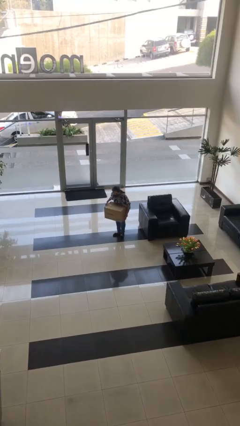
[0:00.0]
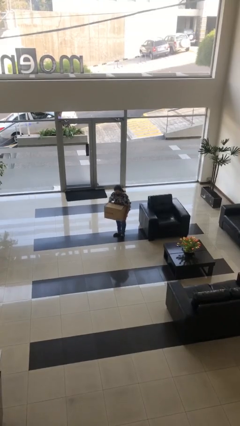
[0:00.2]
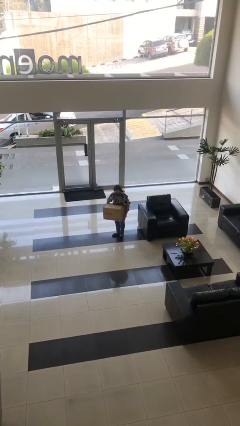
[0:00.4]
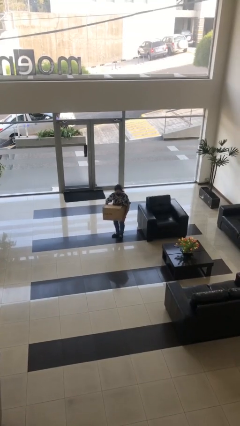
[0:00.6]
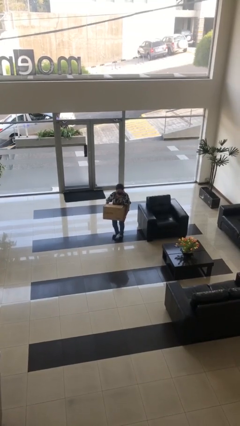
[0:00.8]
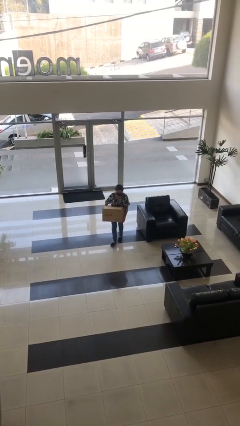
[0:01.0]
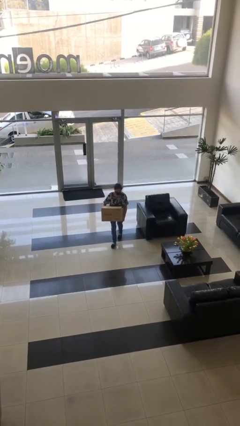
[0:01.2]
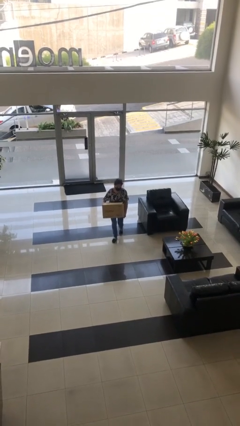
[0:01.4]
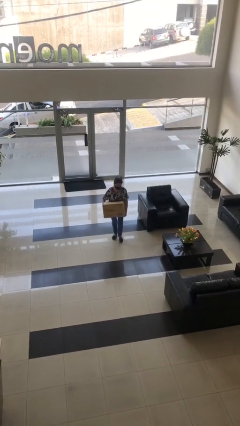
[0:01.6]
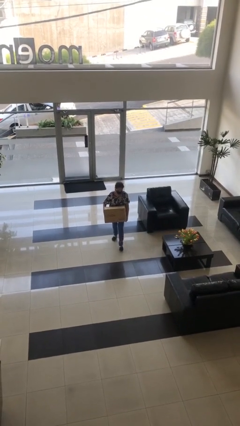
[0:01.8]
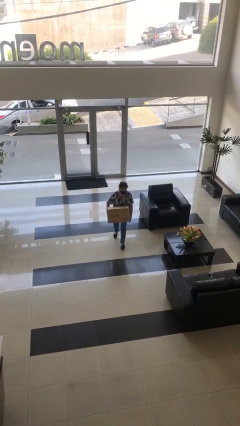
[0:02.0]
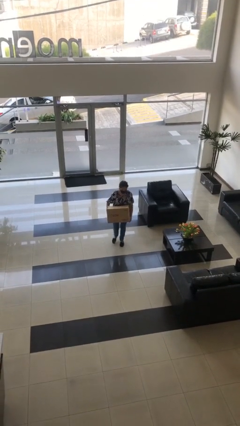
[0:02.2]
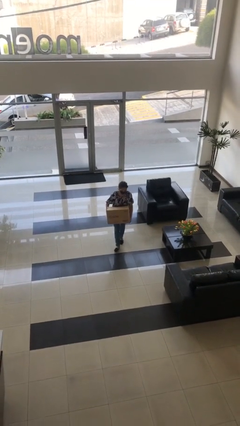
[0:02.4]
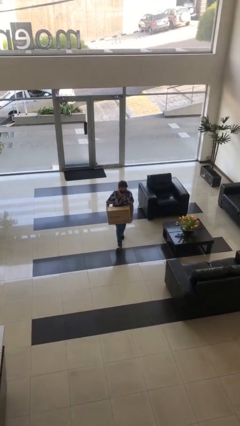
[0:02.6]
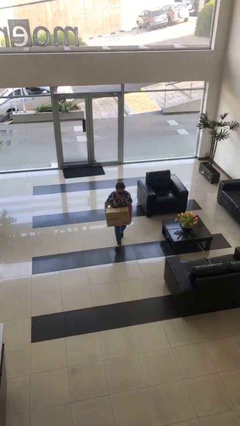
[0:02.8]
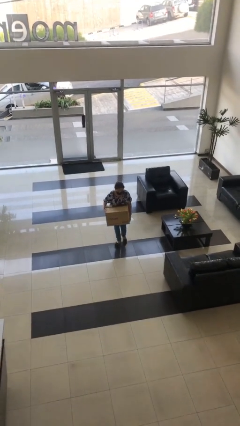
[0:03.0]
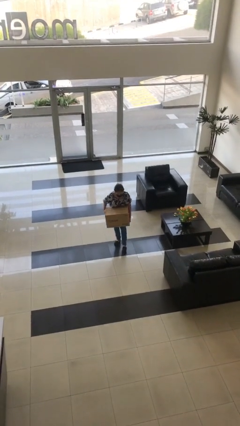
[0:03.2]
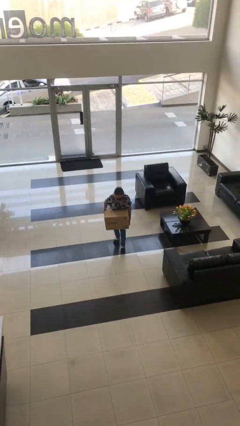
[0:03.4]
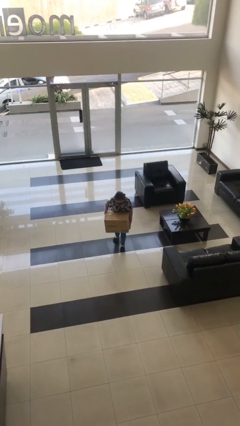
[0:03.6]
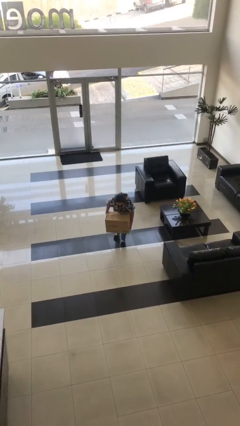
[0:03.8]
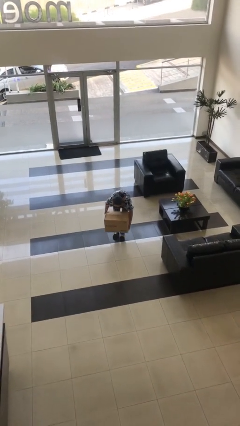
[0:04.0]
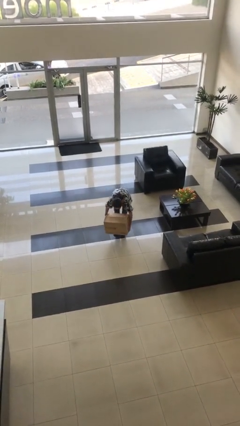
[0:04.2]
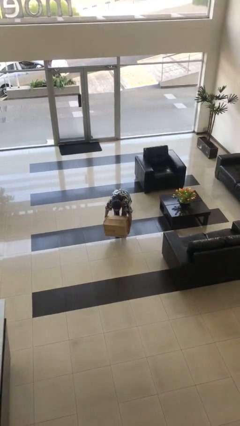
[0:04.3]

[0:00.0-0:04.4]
person carries heavy object

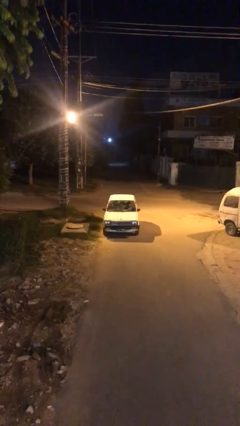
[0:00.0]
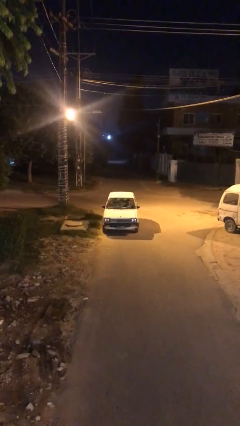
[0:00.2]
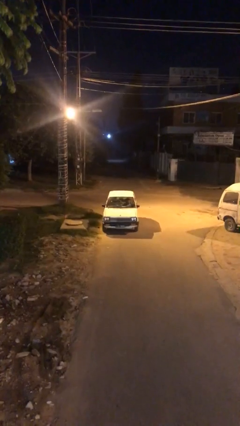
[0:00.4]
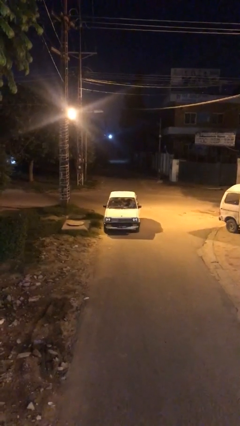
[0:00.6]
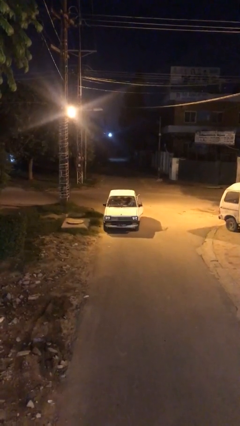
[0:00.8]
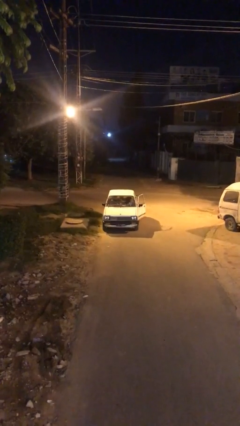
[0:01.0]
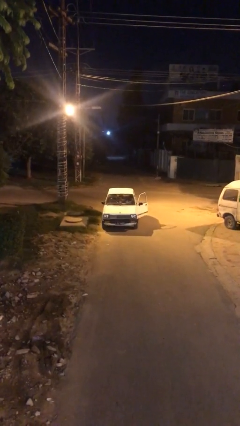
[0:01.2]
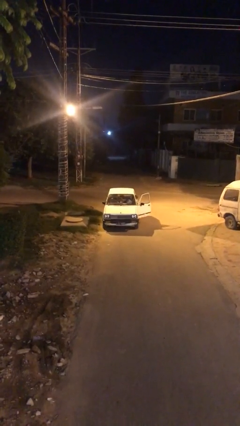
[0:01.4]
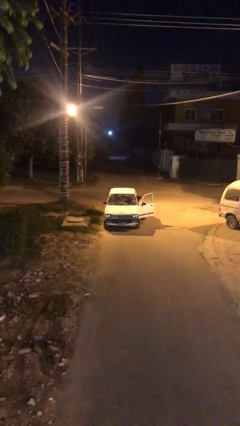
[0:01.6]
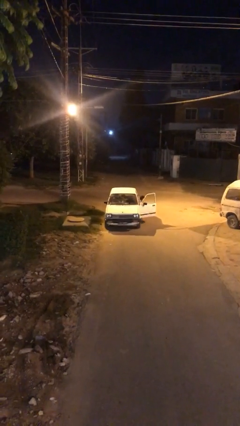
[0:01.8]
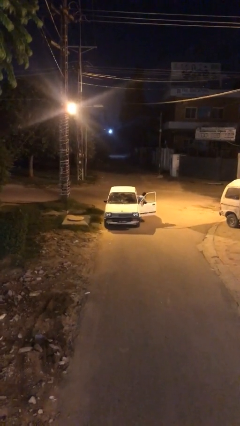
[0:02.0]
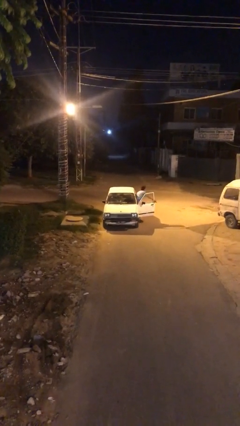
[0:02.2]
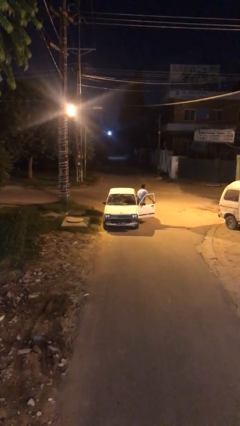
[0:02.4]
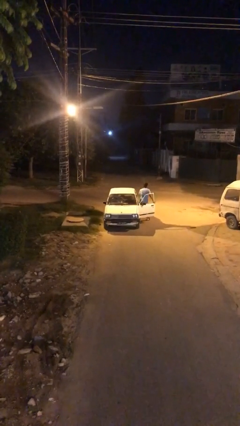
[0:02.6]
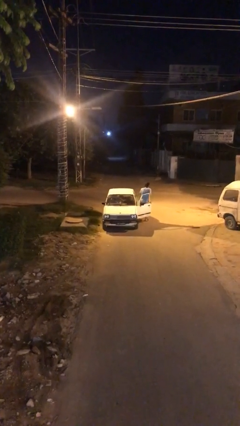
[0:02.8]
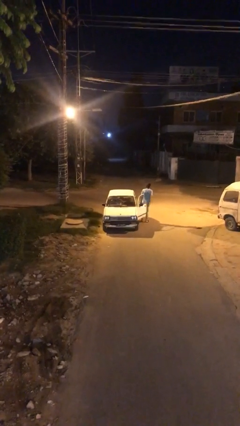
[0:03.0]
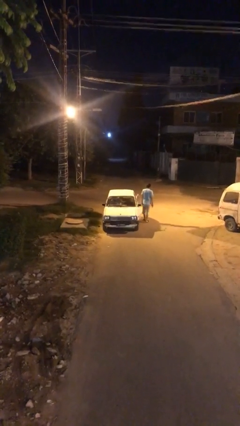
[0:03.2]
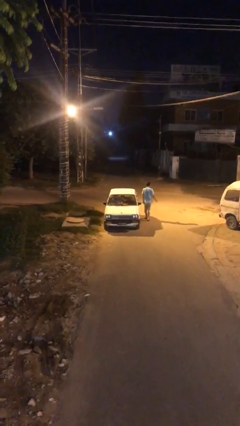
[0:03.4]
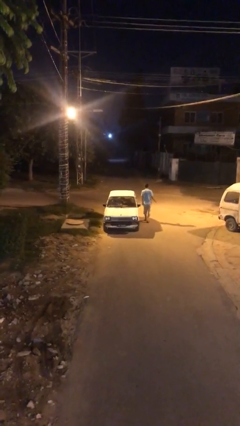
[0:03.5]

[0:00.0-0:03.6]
car drops off person

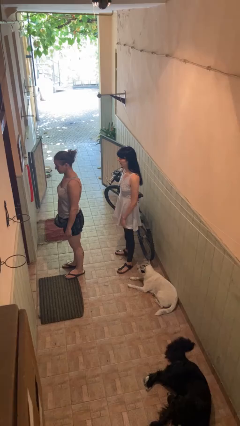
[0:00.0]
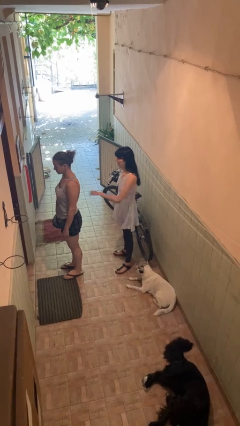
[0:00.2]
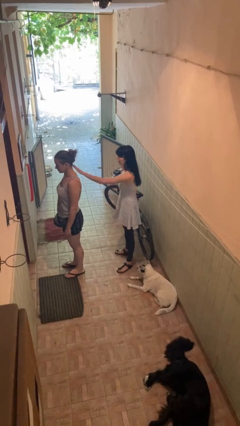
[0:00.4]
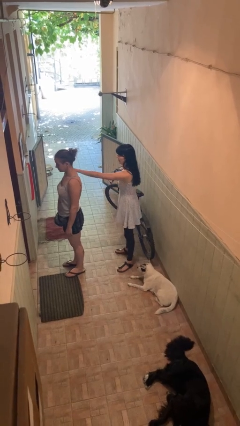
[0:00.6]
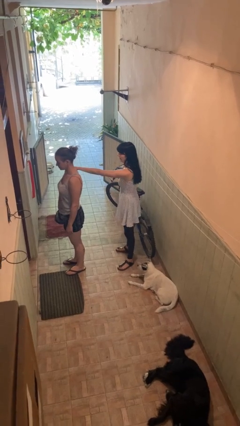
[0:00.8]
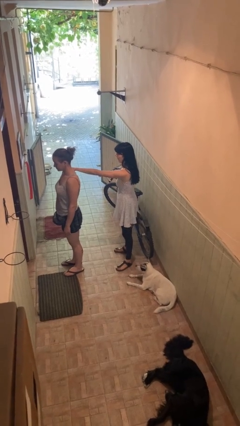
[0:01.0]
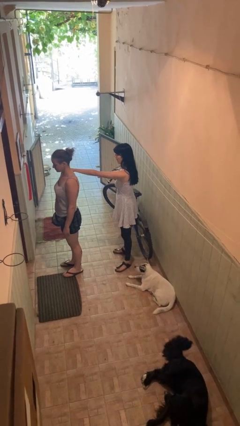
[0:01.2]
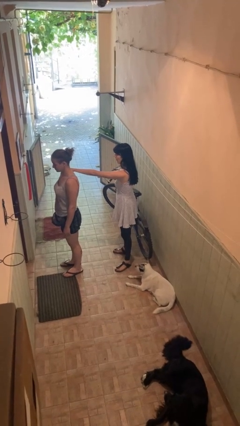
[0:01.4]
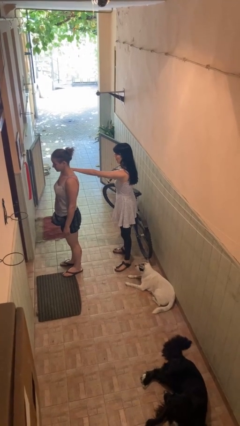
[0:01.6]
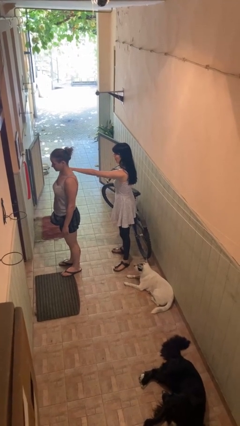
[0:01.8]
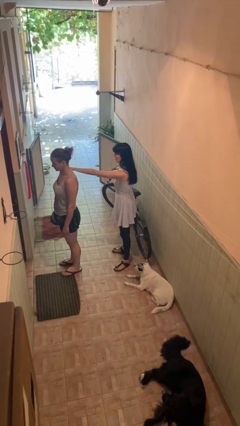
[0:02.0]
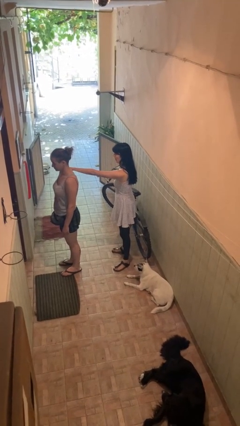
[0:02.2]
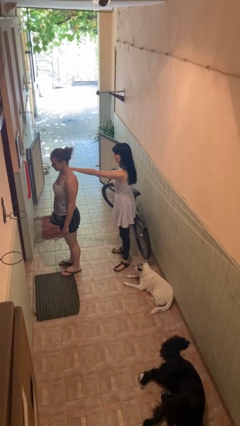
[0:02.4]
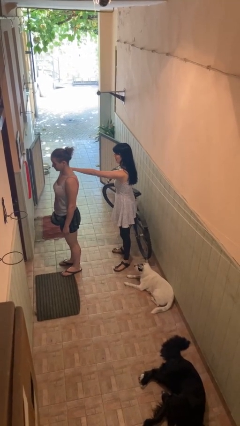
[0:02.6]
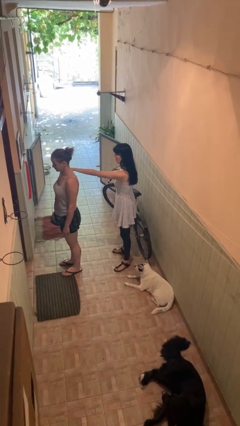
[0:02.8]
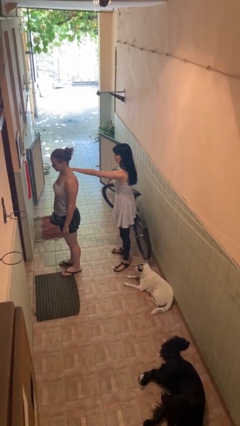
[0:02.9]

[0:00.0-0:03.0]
person grabs person by shoulder

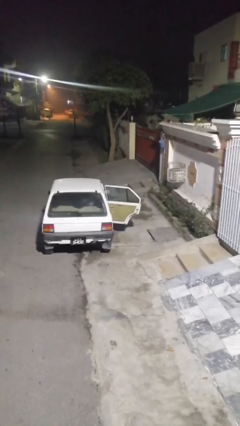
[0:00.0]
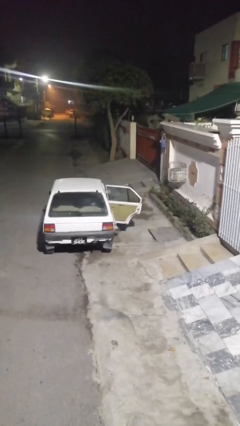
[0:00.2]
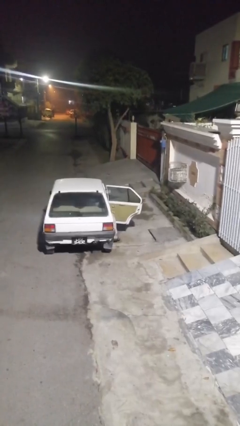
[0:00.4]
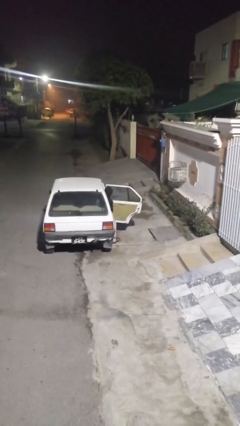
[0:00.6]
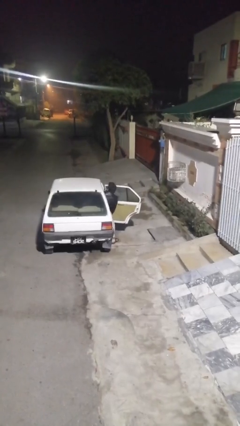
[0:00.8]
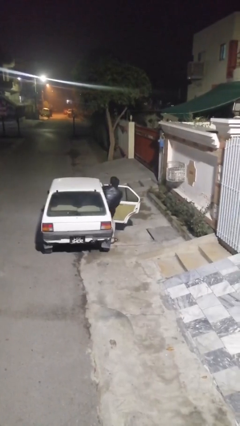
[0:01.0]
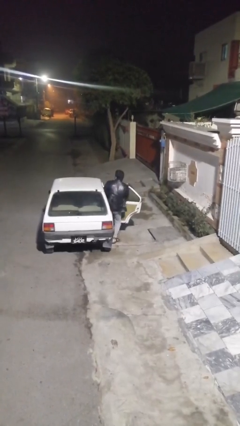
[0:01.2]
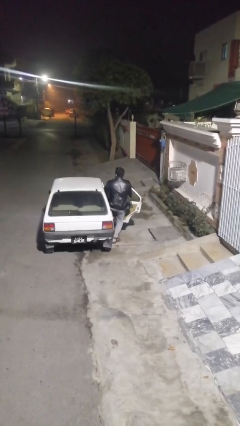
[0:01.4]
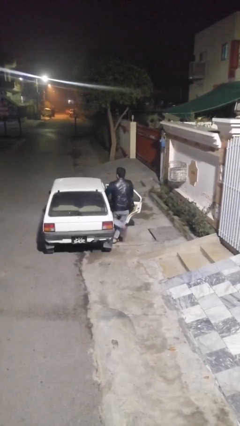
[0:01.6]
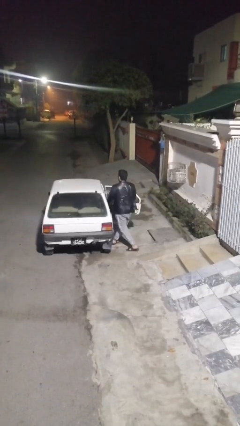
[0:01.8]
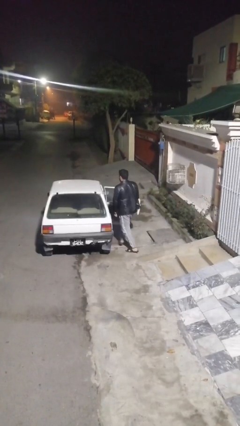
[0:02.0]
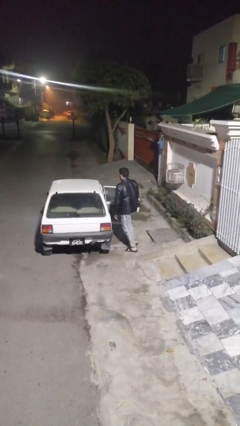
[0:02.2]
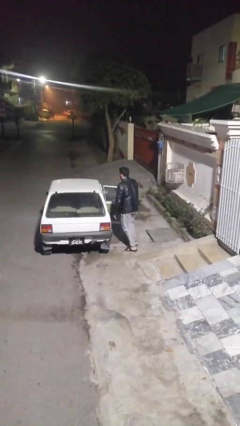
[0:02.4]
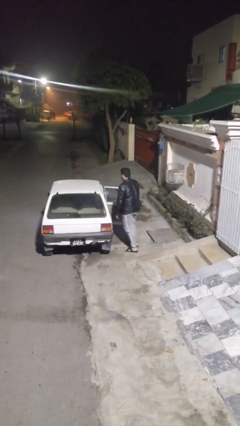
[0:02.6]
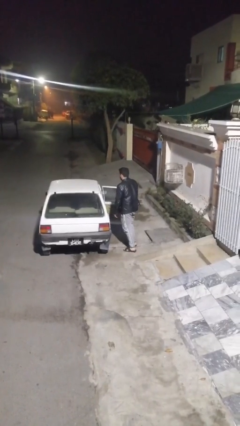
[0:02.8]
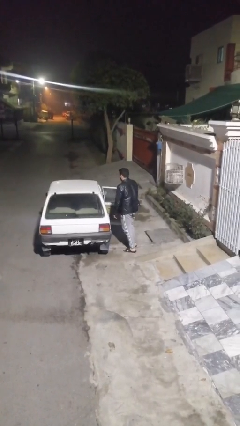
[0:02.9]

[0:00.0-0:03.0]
person exits car

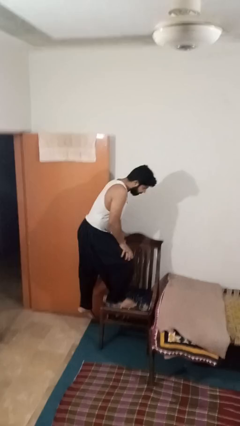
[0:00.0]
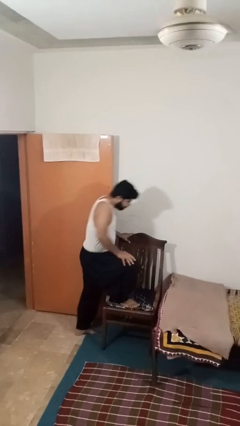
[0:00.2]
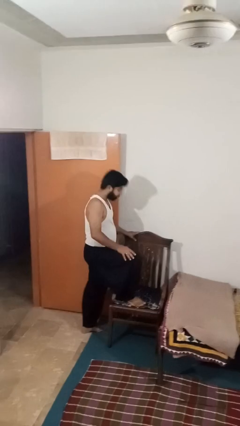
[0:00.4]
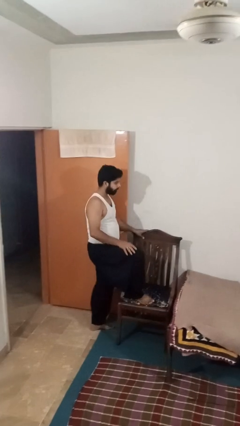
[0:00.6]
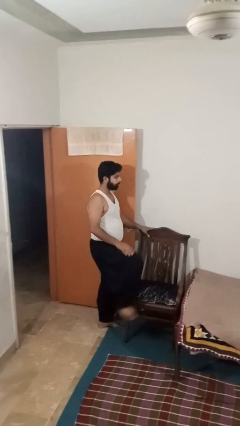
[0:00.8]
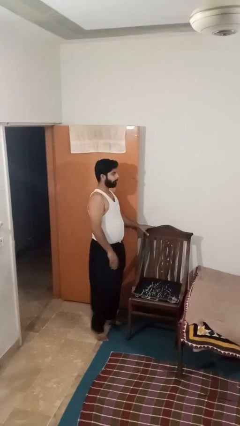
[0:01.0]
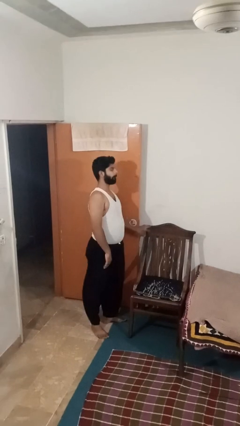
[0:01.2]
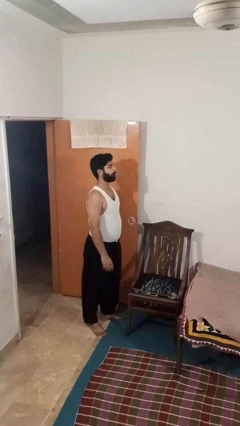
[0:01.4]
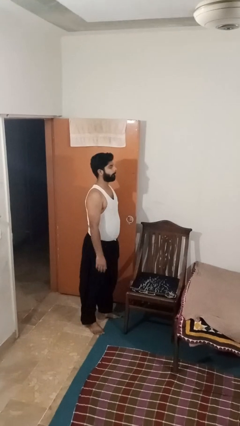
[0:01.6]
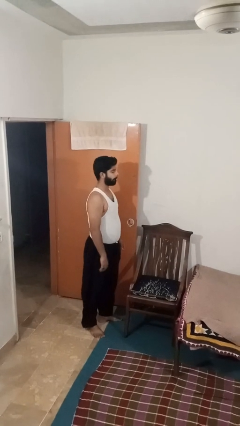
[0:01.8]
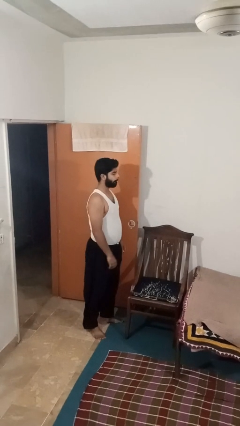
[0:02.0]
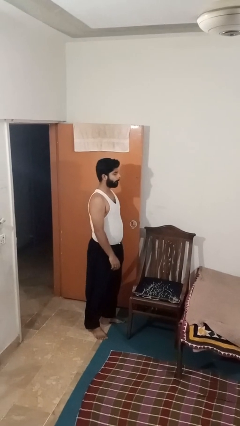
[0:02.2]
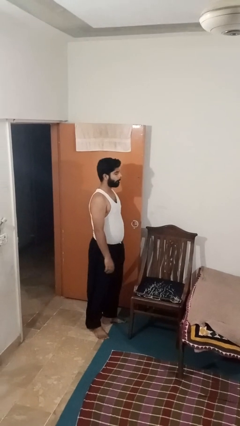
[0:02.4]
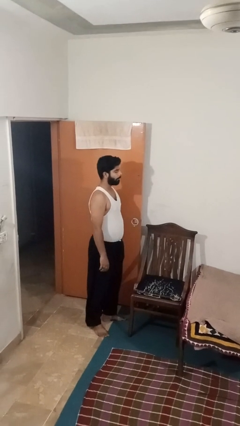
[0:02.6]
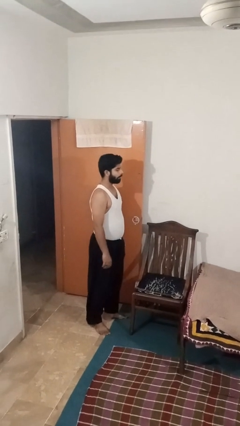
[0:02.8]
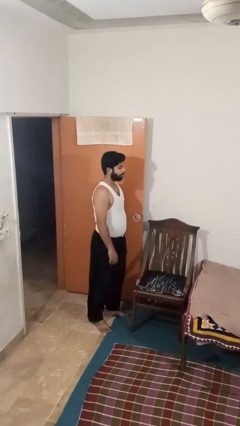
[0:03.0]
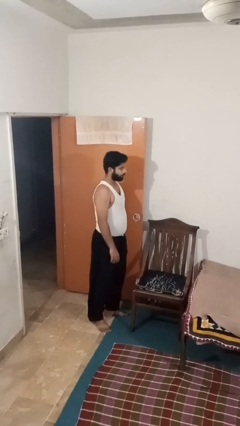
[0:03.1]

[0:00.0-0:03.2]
person climbs off chair

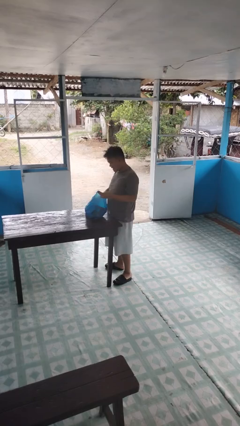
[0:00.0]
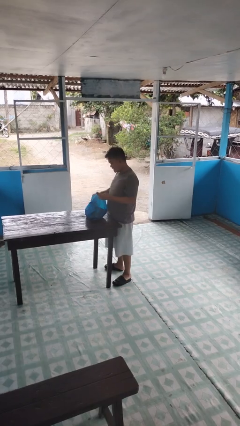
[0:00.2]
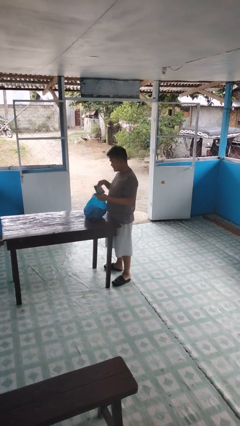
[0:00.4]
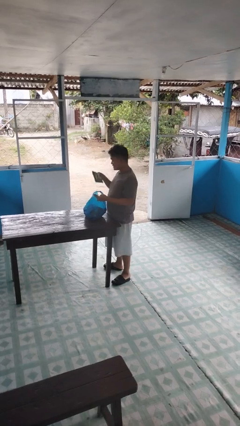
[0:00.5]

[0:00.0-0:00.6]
person takes object from bag
